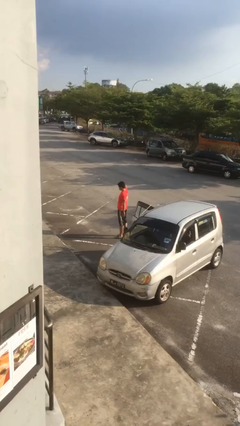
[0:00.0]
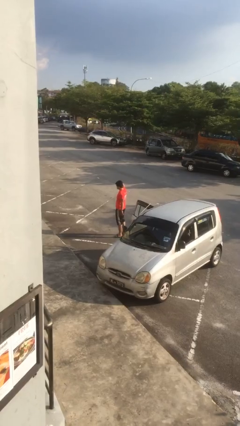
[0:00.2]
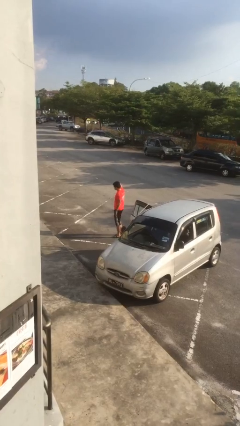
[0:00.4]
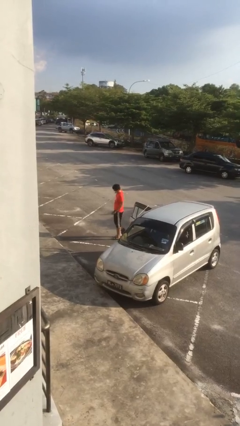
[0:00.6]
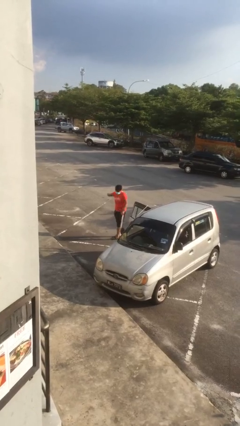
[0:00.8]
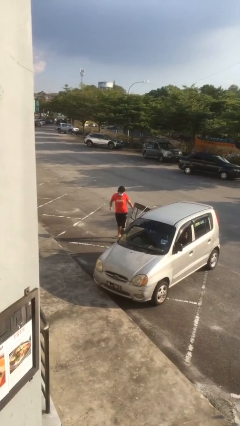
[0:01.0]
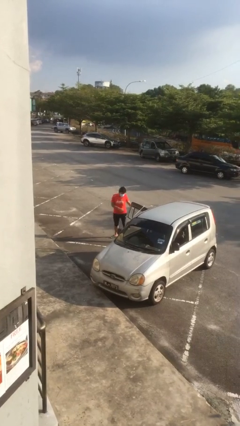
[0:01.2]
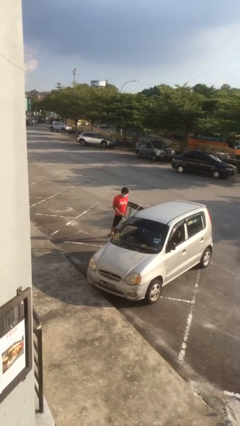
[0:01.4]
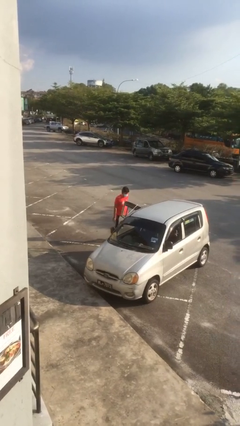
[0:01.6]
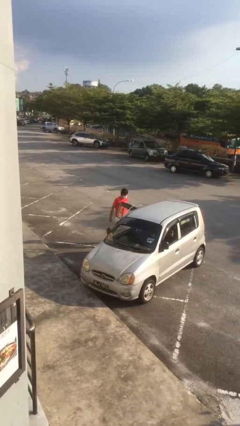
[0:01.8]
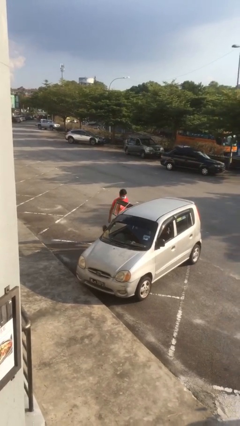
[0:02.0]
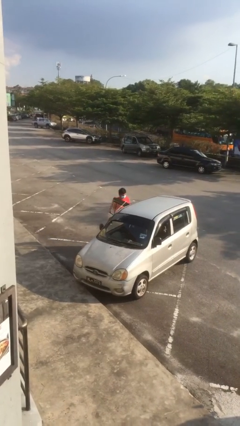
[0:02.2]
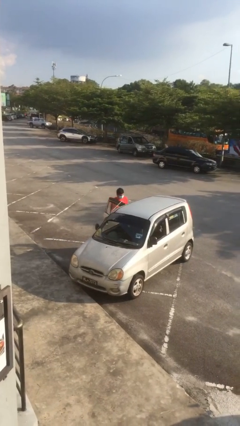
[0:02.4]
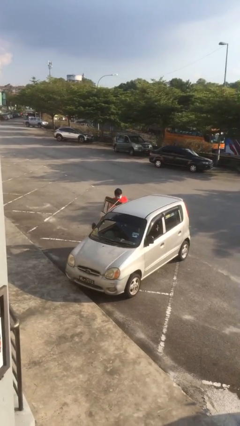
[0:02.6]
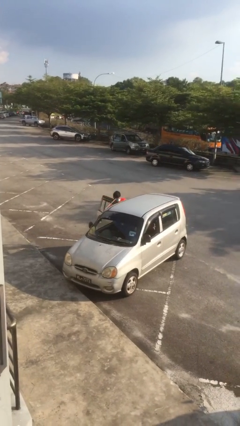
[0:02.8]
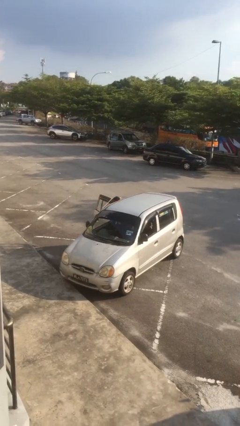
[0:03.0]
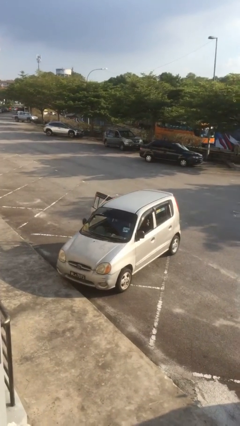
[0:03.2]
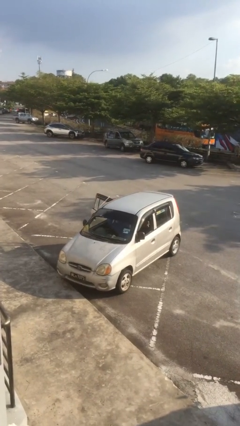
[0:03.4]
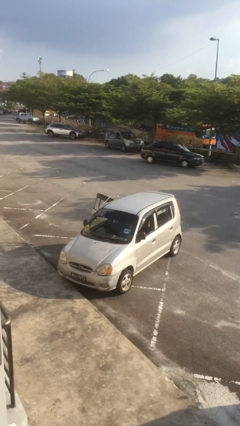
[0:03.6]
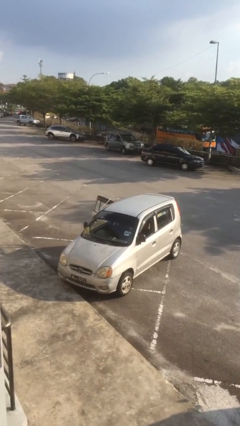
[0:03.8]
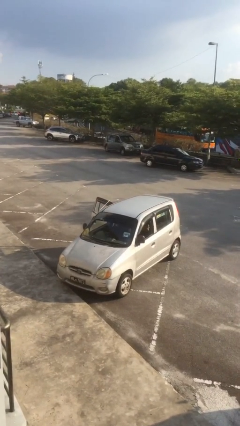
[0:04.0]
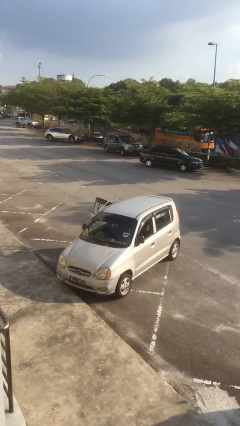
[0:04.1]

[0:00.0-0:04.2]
person enters car

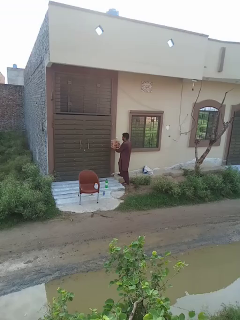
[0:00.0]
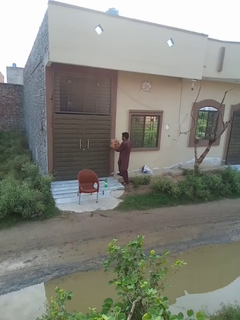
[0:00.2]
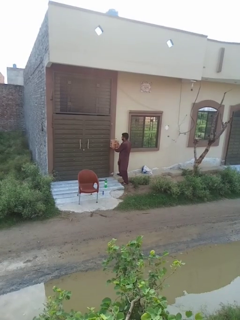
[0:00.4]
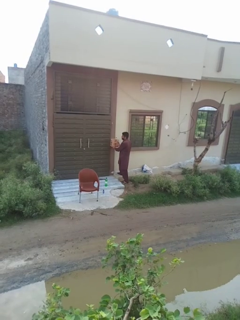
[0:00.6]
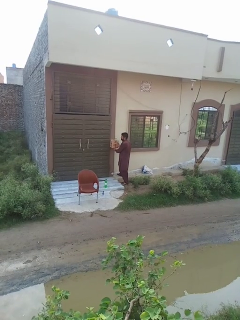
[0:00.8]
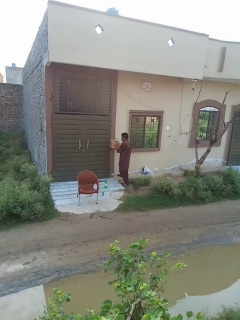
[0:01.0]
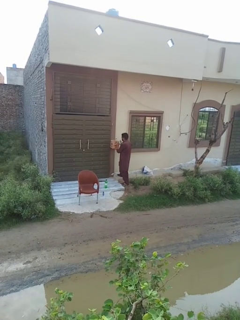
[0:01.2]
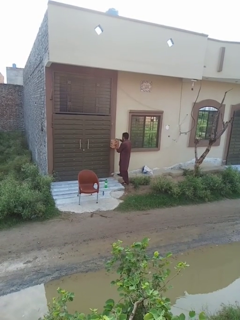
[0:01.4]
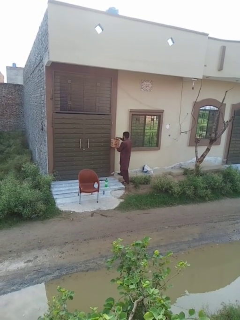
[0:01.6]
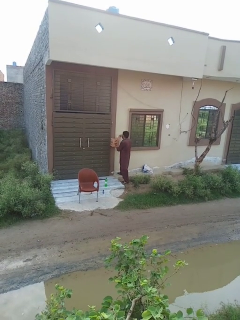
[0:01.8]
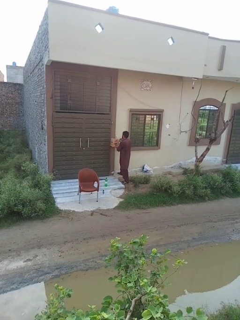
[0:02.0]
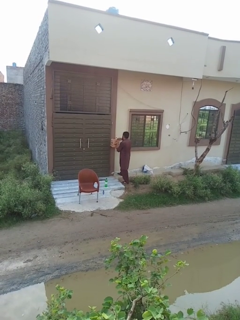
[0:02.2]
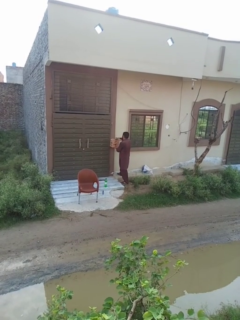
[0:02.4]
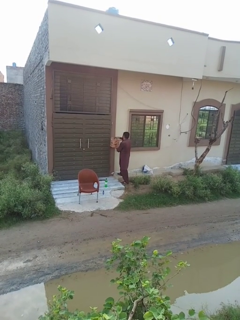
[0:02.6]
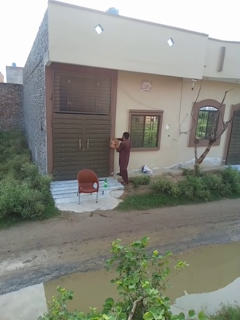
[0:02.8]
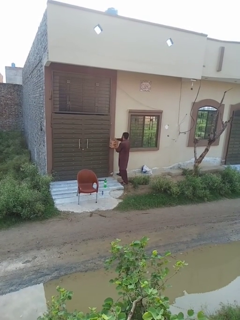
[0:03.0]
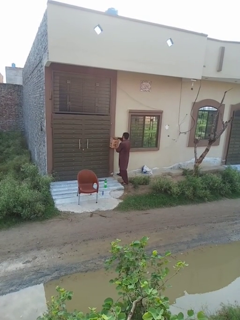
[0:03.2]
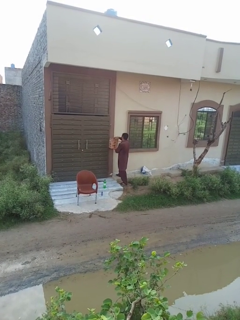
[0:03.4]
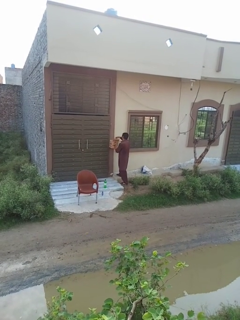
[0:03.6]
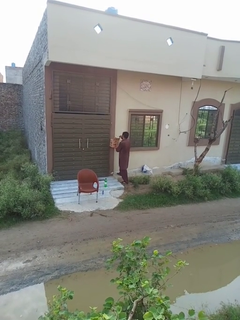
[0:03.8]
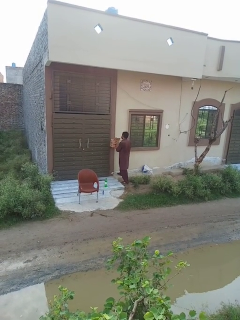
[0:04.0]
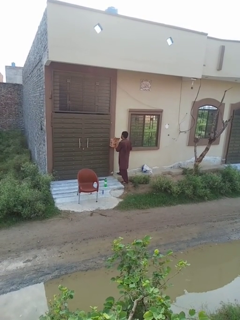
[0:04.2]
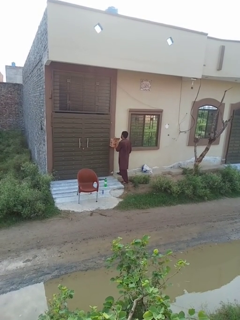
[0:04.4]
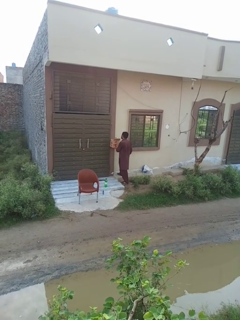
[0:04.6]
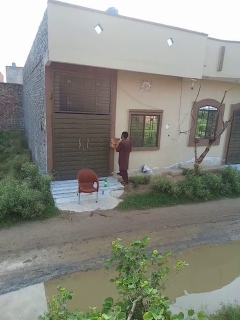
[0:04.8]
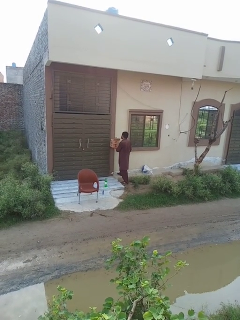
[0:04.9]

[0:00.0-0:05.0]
person opens mailbox

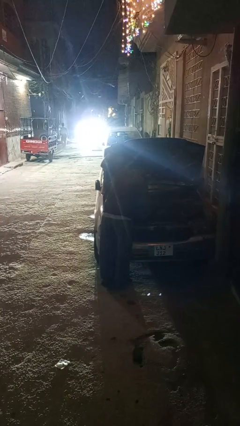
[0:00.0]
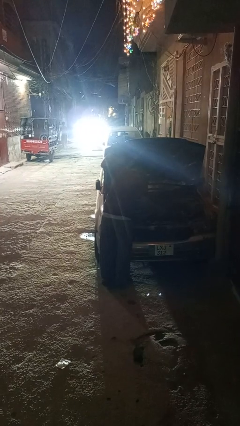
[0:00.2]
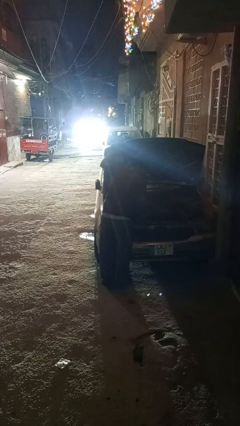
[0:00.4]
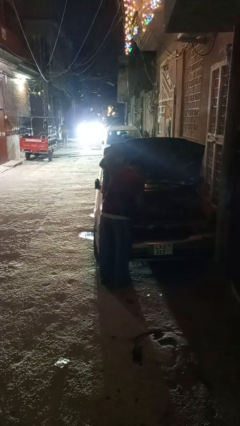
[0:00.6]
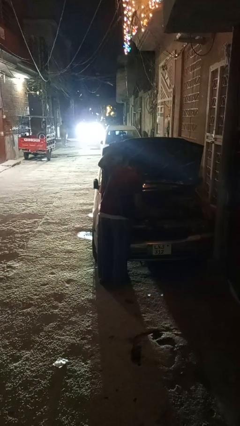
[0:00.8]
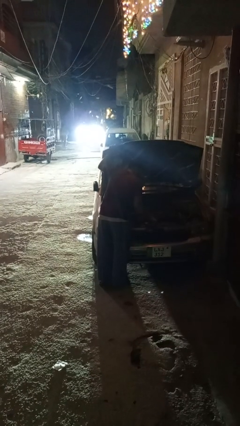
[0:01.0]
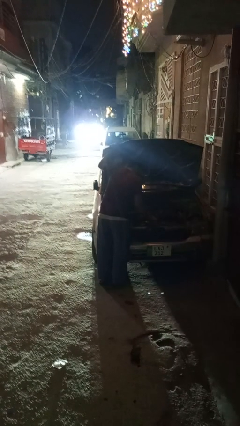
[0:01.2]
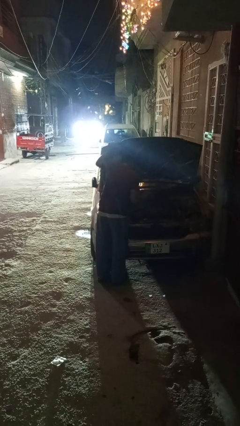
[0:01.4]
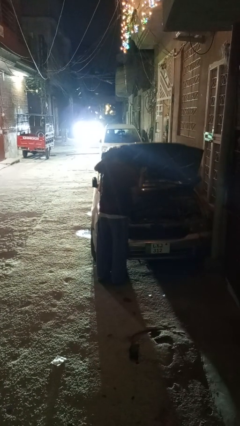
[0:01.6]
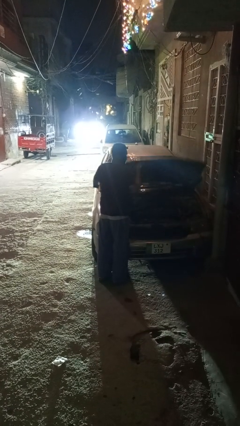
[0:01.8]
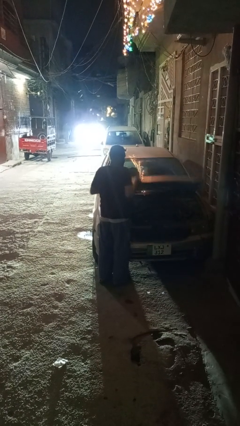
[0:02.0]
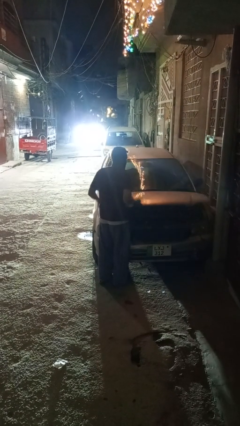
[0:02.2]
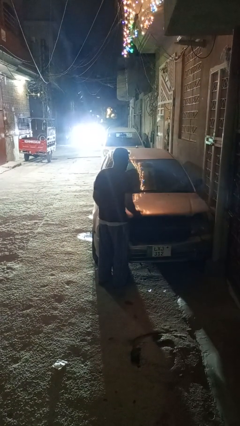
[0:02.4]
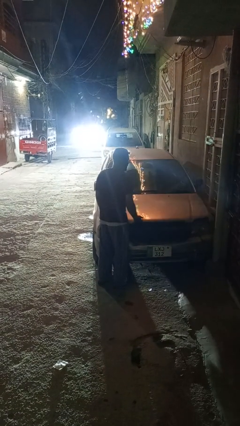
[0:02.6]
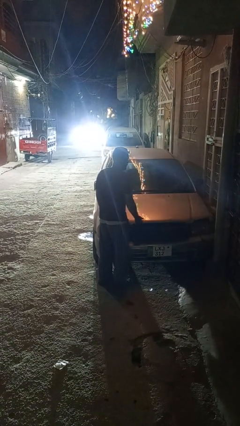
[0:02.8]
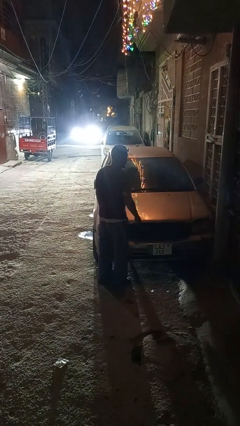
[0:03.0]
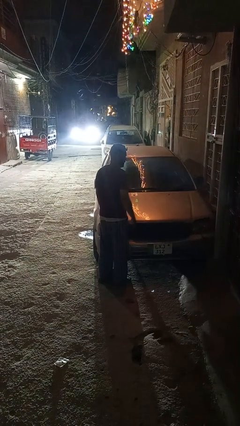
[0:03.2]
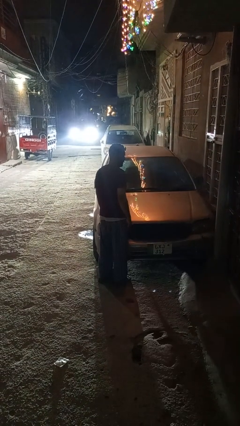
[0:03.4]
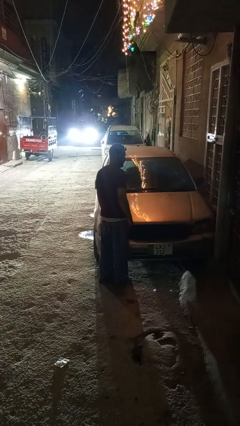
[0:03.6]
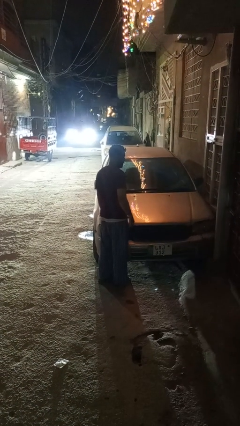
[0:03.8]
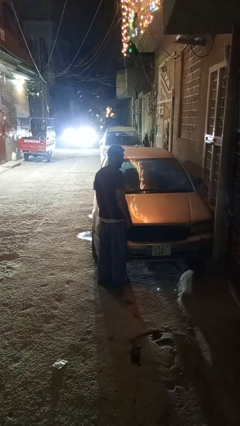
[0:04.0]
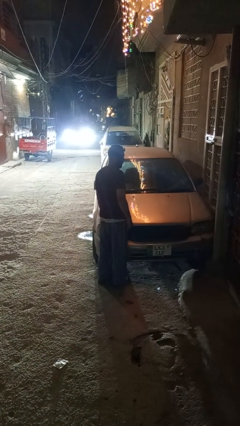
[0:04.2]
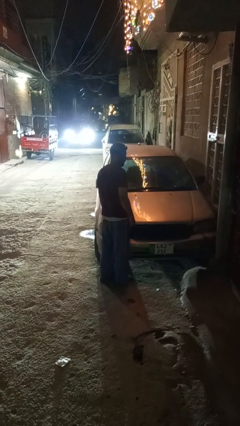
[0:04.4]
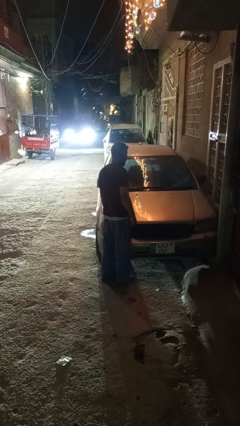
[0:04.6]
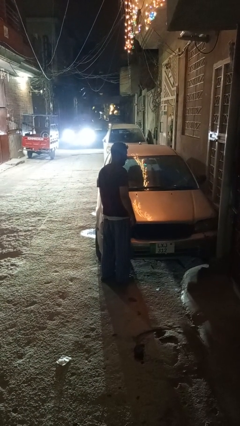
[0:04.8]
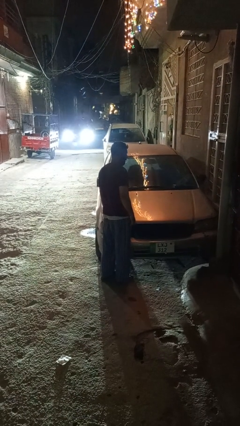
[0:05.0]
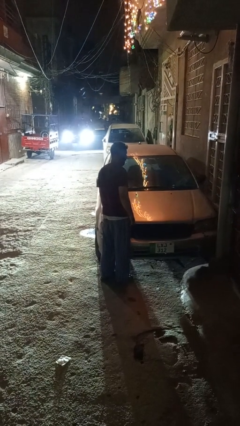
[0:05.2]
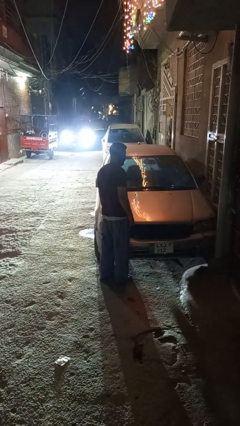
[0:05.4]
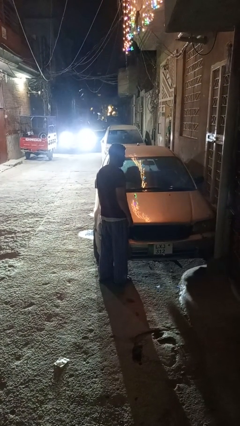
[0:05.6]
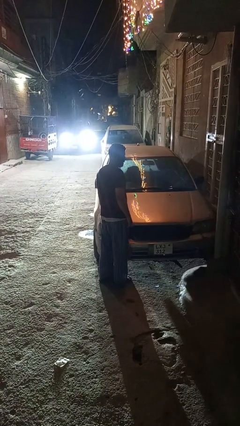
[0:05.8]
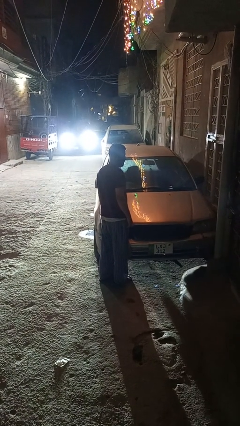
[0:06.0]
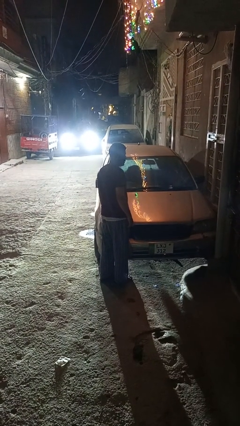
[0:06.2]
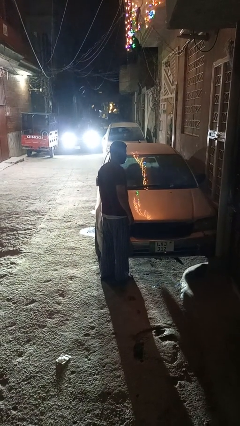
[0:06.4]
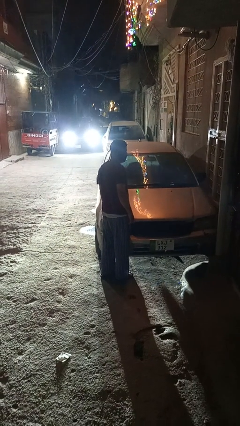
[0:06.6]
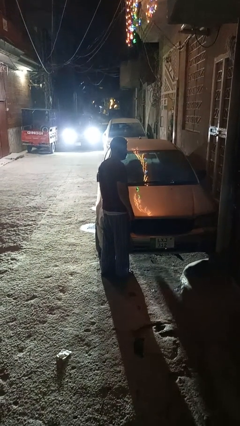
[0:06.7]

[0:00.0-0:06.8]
person closes car hood

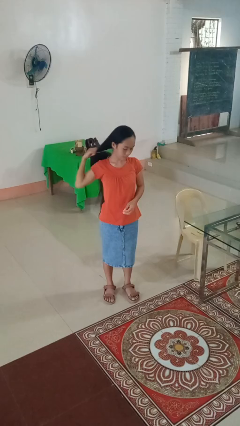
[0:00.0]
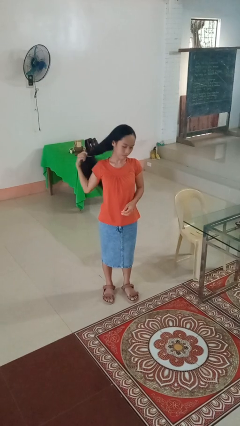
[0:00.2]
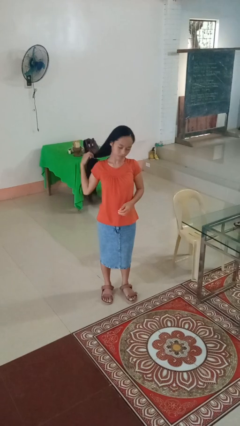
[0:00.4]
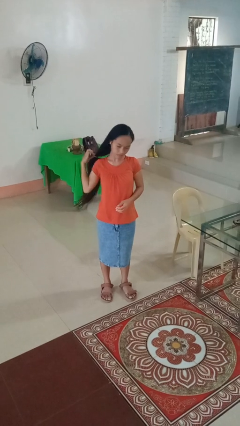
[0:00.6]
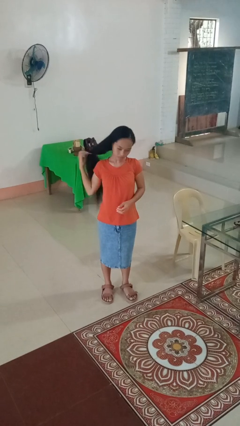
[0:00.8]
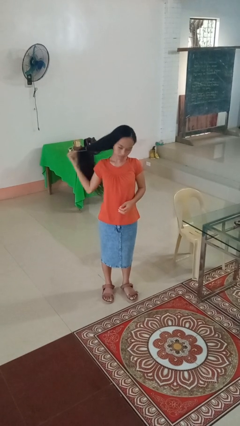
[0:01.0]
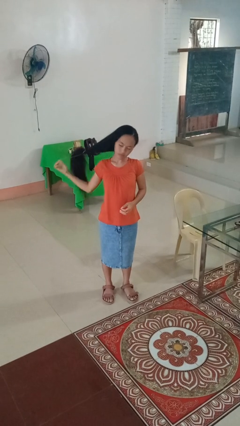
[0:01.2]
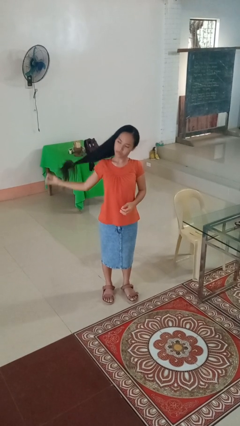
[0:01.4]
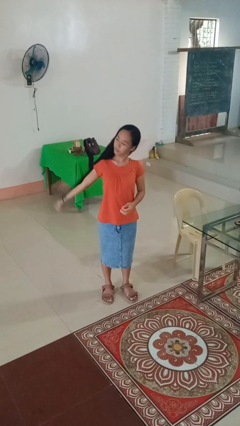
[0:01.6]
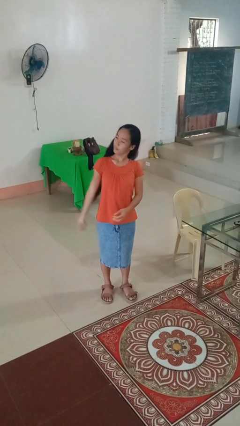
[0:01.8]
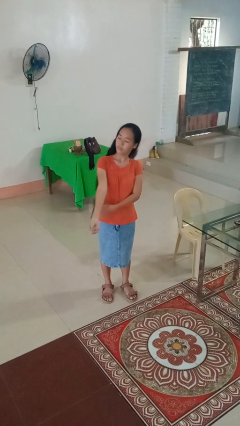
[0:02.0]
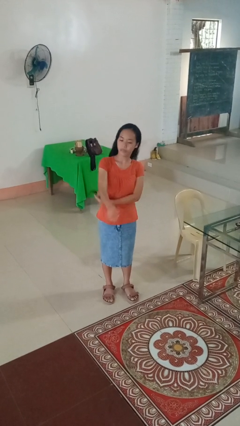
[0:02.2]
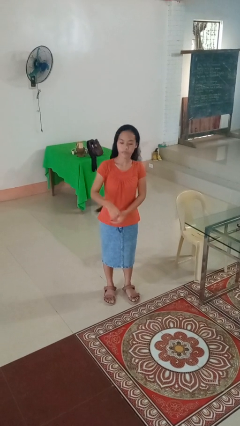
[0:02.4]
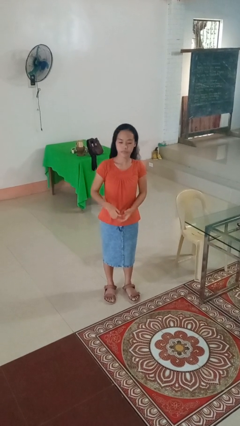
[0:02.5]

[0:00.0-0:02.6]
person takes off hairtie

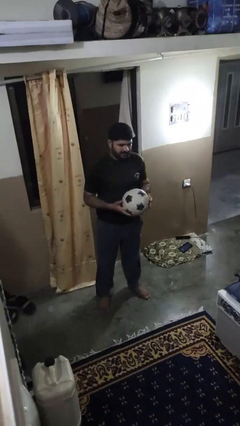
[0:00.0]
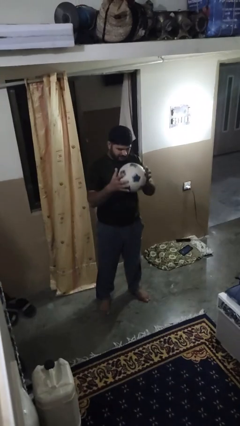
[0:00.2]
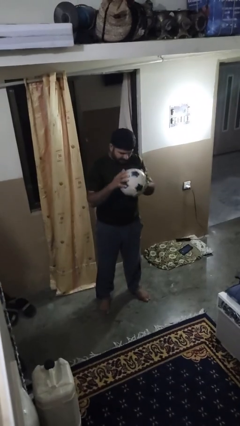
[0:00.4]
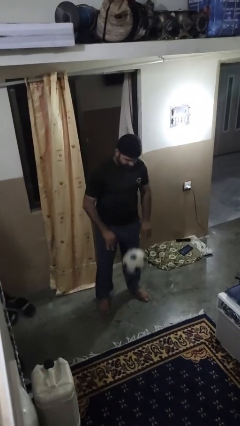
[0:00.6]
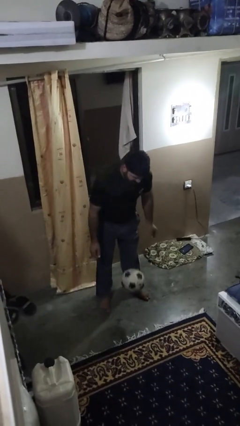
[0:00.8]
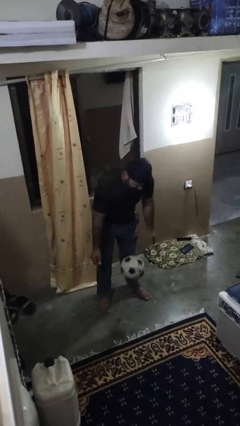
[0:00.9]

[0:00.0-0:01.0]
person bounces ball on floor
